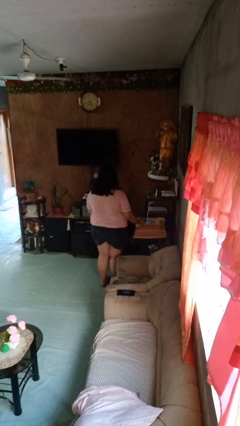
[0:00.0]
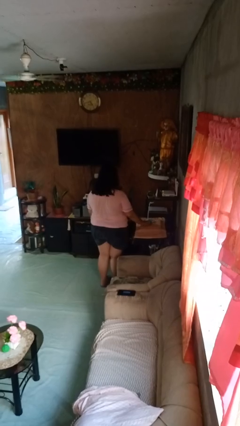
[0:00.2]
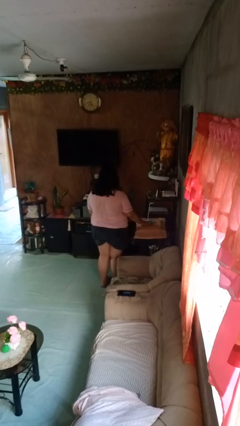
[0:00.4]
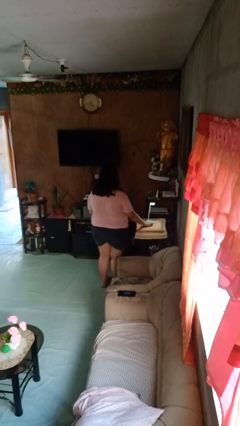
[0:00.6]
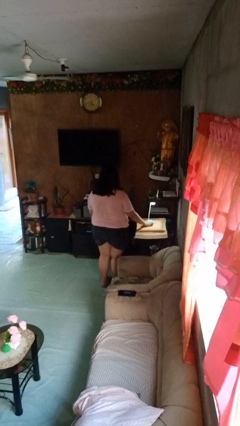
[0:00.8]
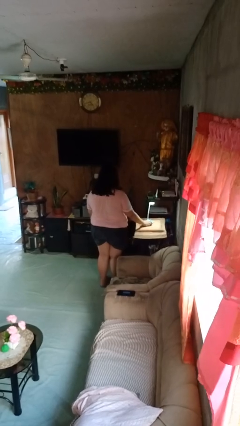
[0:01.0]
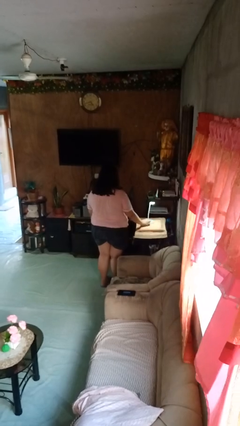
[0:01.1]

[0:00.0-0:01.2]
person turns on lamp

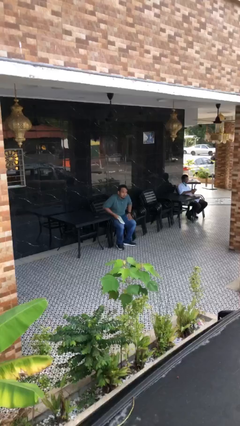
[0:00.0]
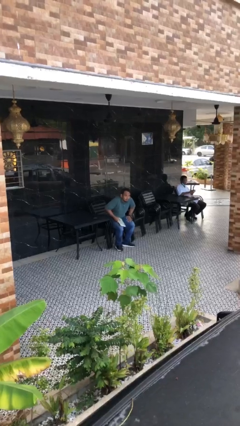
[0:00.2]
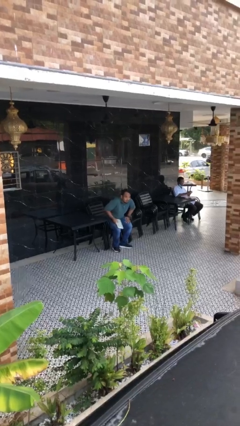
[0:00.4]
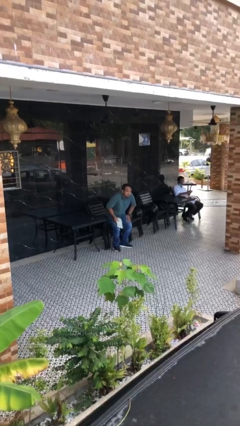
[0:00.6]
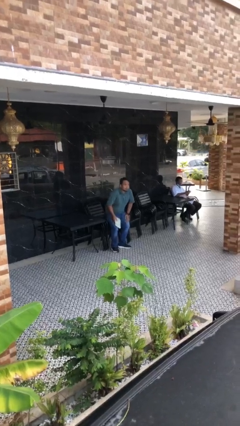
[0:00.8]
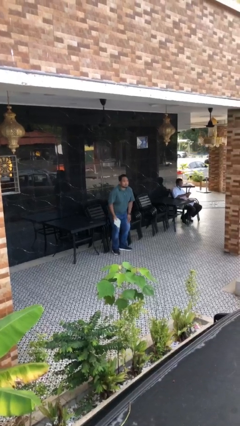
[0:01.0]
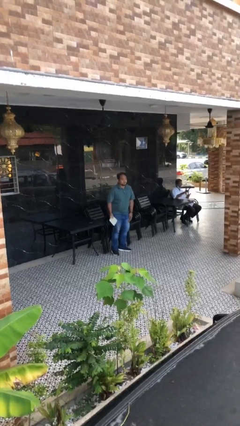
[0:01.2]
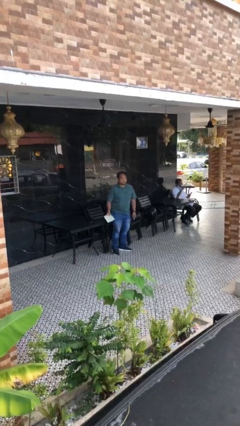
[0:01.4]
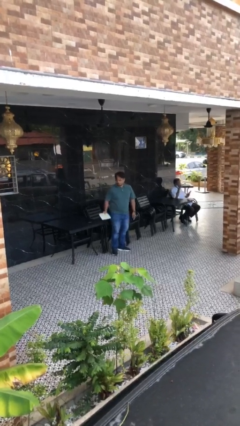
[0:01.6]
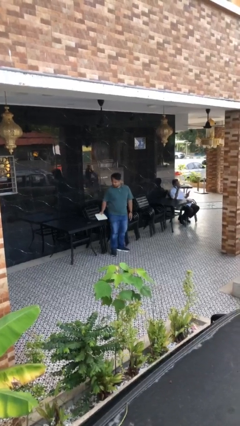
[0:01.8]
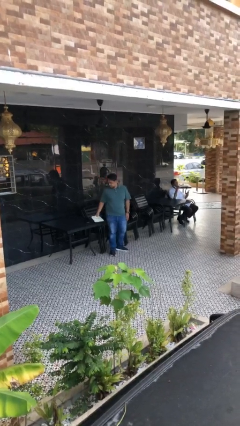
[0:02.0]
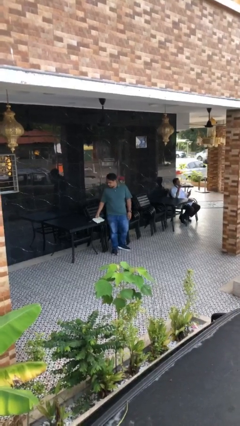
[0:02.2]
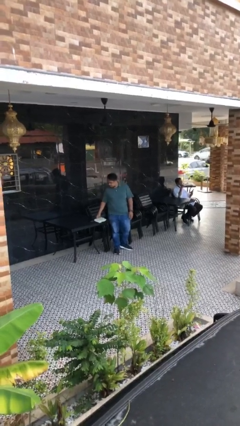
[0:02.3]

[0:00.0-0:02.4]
person stands up

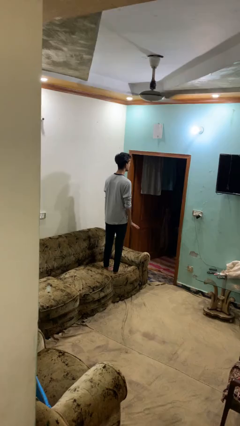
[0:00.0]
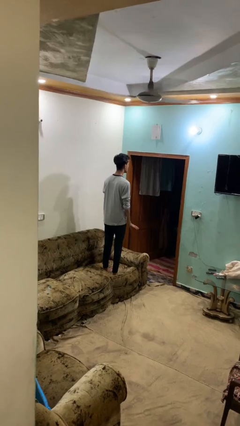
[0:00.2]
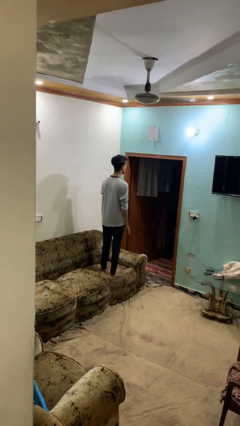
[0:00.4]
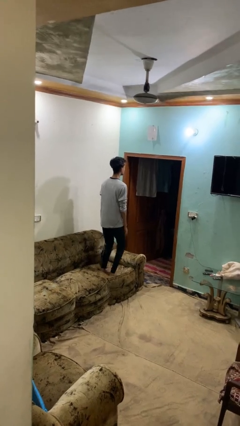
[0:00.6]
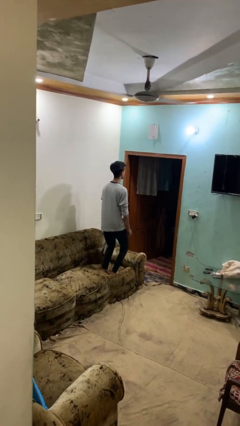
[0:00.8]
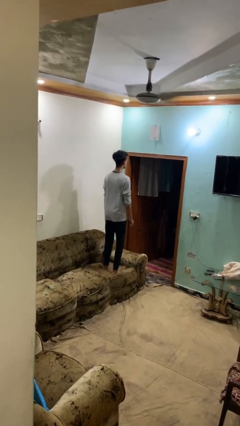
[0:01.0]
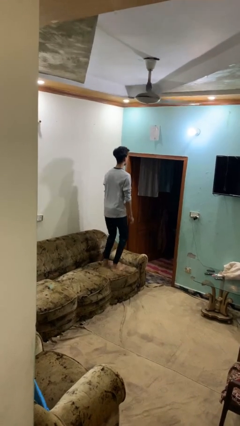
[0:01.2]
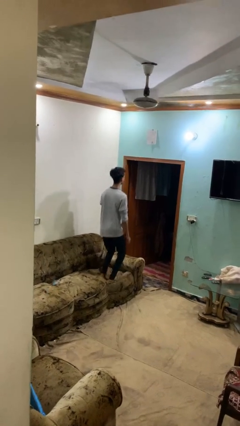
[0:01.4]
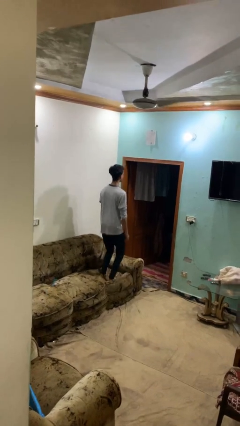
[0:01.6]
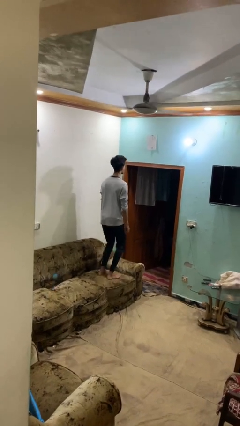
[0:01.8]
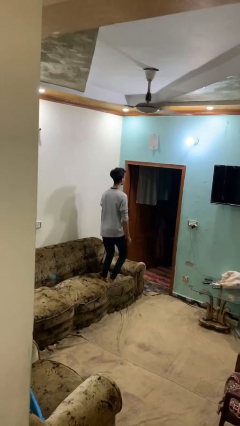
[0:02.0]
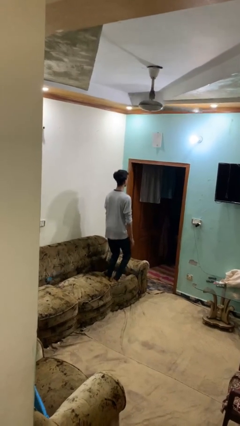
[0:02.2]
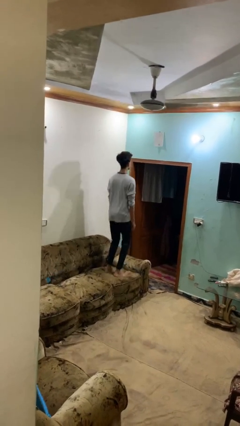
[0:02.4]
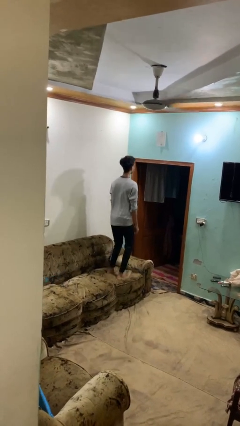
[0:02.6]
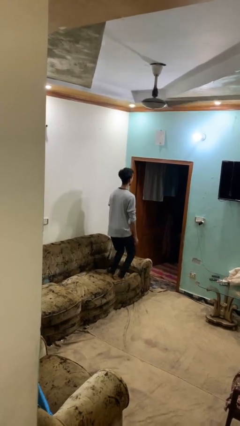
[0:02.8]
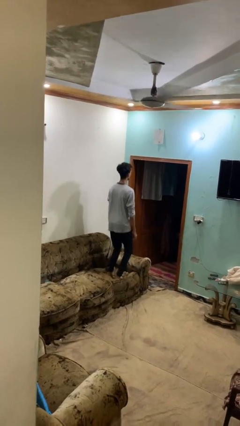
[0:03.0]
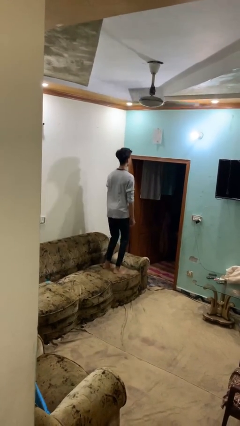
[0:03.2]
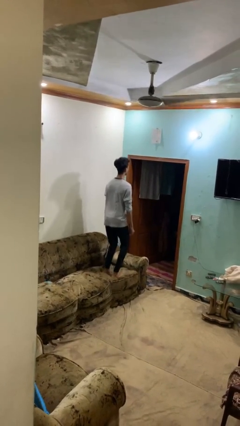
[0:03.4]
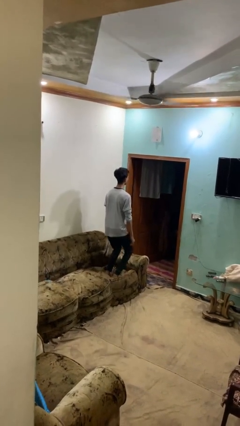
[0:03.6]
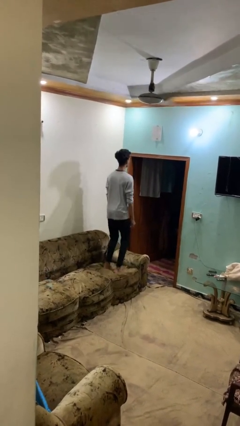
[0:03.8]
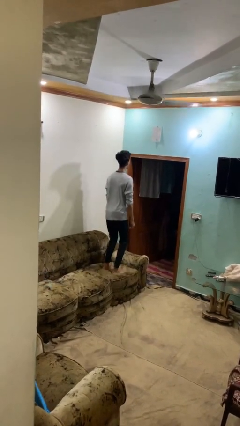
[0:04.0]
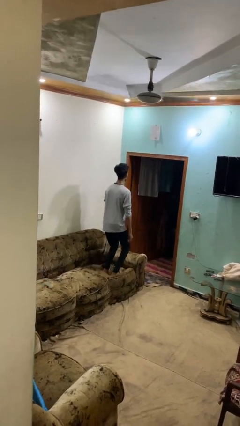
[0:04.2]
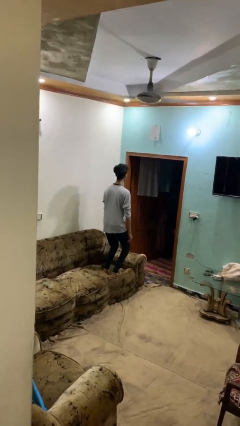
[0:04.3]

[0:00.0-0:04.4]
person jumps on couch

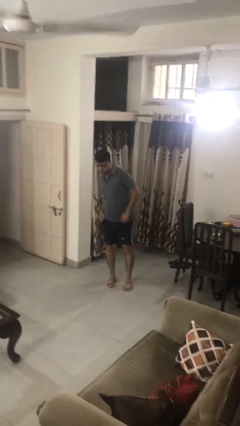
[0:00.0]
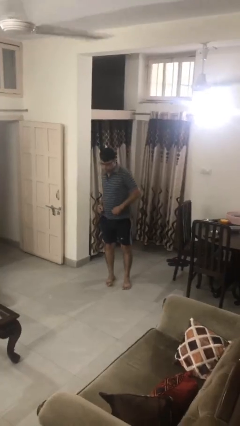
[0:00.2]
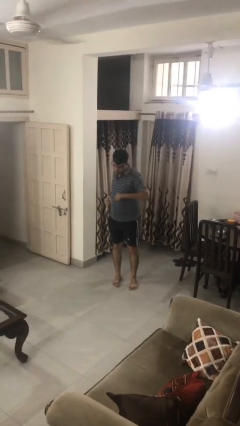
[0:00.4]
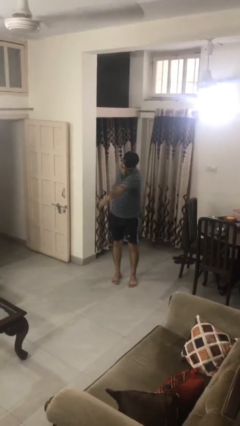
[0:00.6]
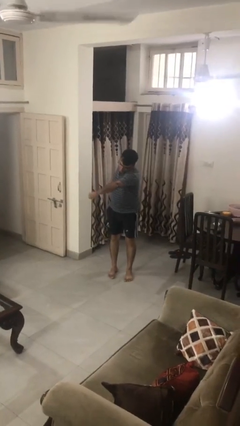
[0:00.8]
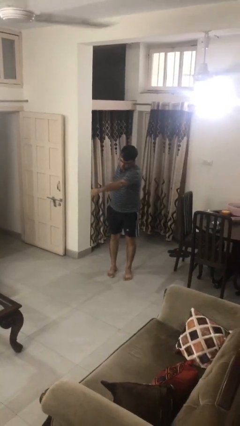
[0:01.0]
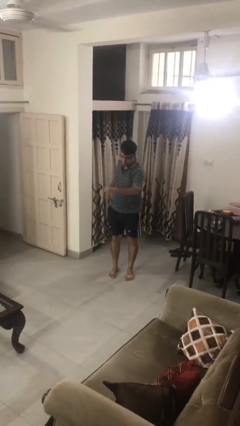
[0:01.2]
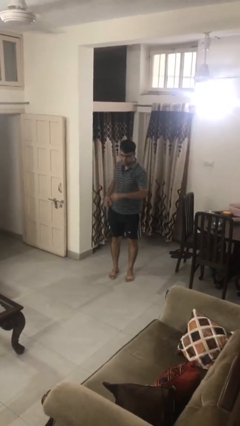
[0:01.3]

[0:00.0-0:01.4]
person karate chop

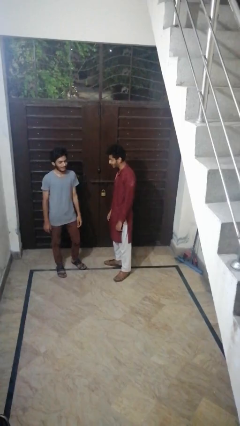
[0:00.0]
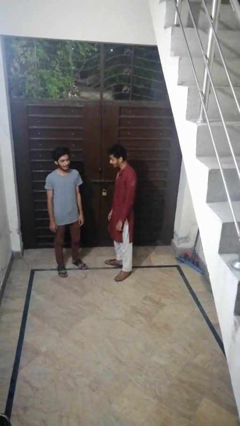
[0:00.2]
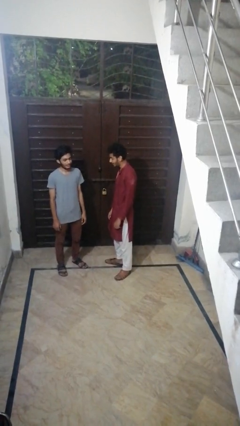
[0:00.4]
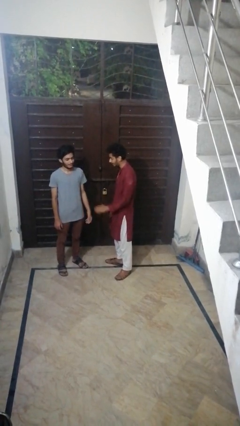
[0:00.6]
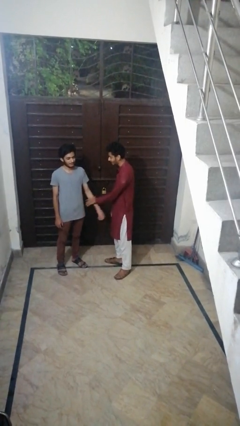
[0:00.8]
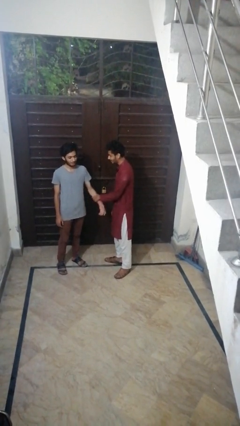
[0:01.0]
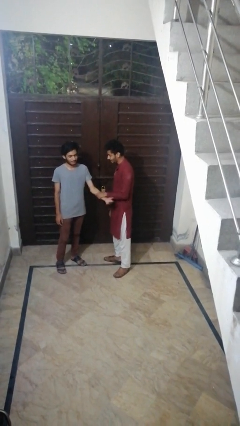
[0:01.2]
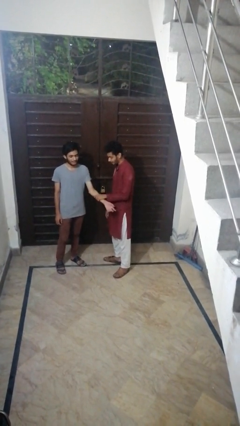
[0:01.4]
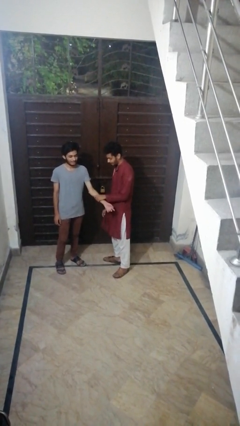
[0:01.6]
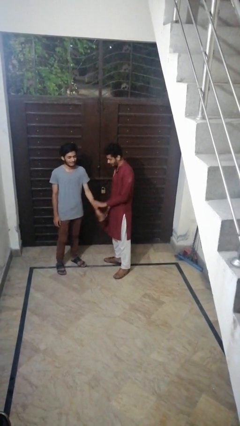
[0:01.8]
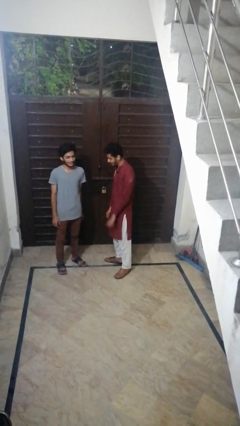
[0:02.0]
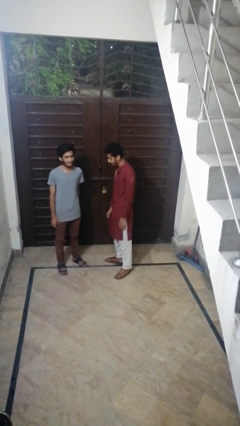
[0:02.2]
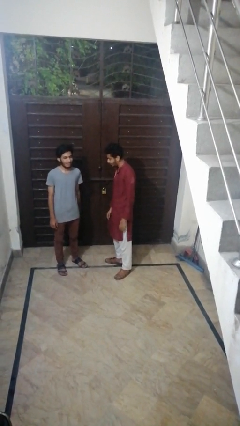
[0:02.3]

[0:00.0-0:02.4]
person grabs person by forearm

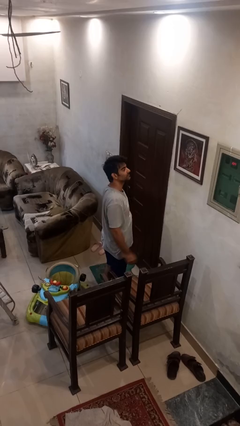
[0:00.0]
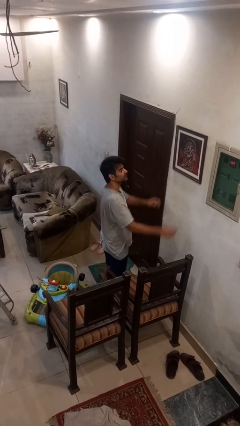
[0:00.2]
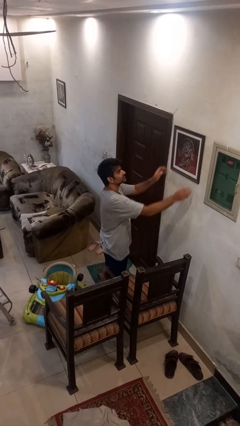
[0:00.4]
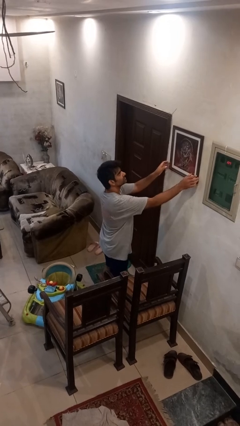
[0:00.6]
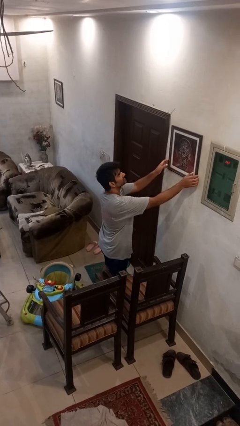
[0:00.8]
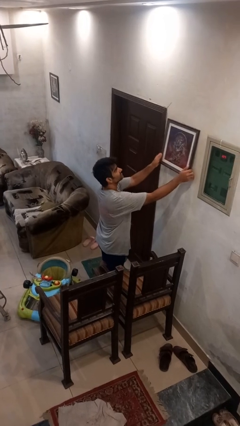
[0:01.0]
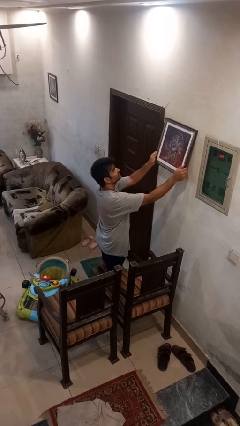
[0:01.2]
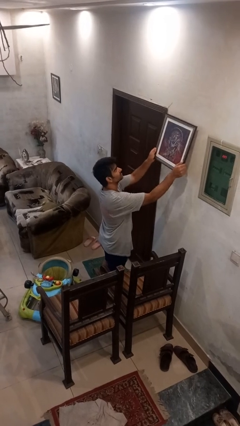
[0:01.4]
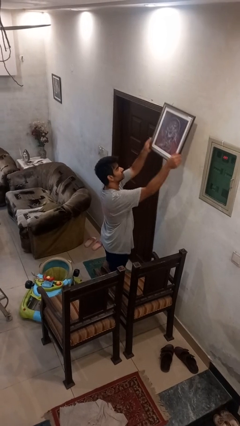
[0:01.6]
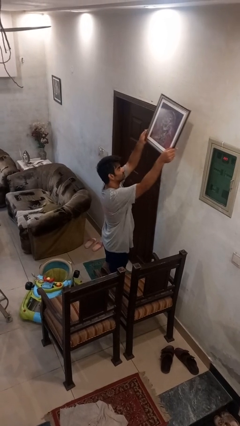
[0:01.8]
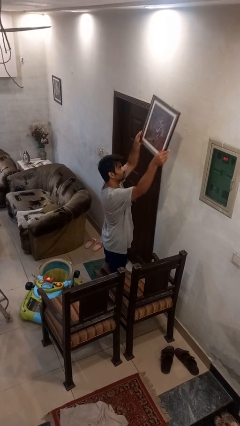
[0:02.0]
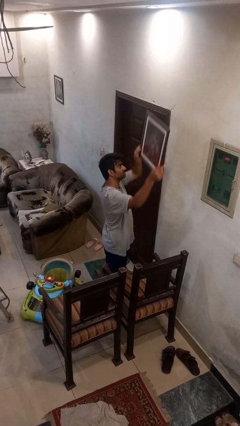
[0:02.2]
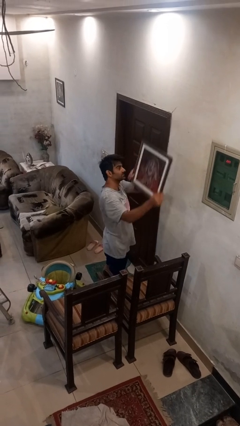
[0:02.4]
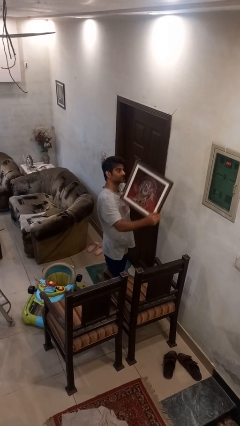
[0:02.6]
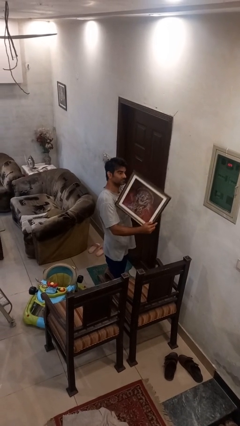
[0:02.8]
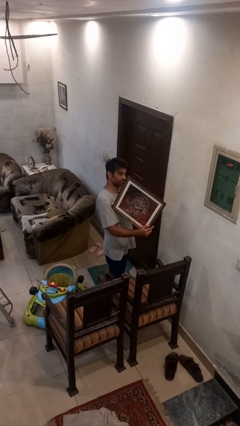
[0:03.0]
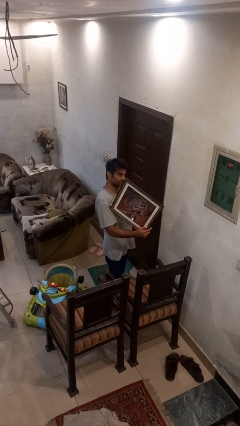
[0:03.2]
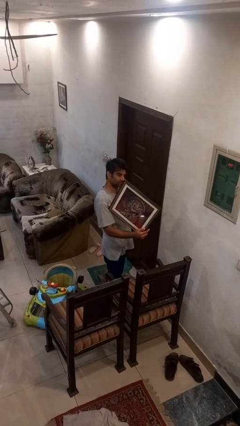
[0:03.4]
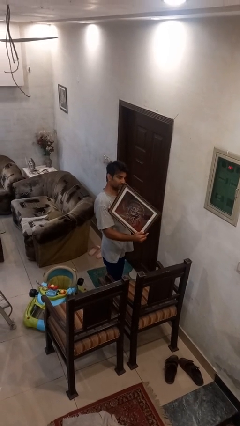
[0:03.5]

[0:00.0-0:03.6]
person takes down picture frame

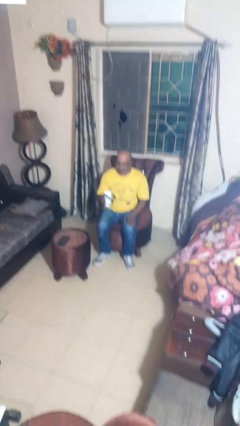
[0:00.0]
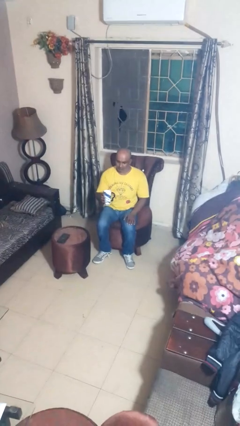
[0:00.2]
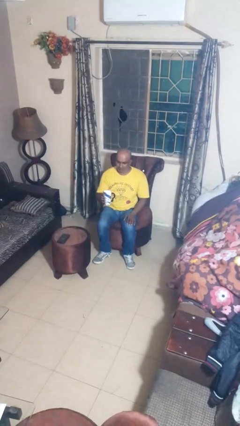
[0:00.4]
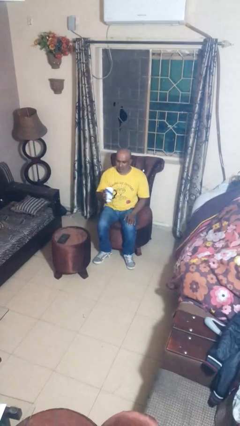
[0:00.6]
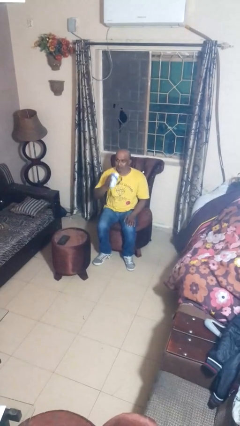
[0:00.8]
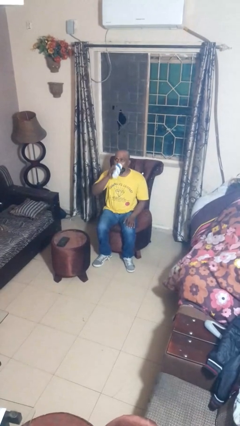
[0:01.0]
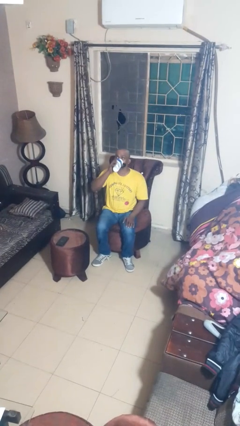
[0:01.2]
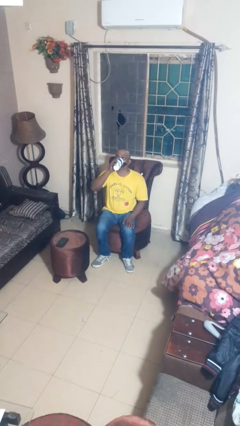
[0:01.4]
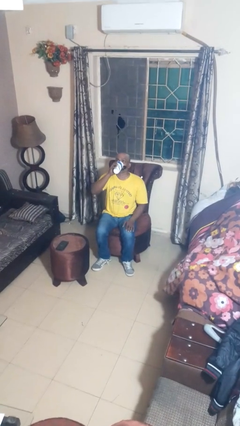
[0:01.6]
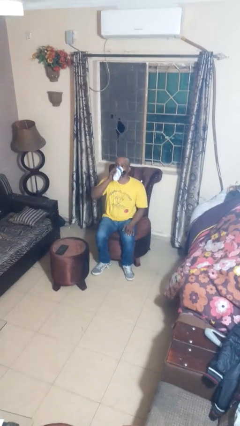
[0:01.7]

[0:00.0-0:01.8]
person drinks from mug
